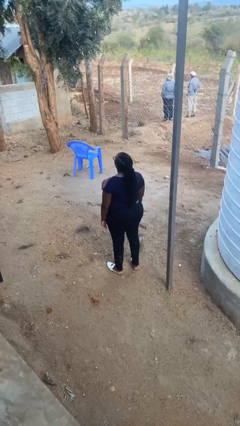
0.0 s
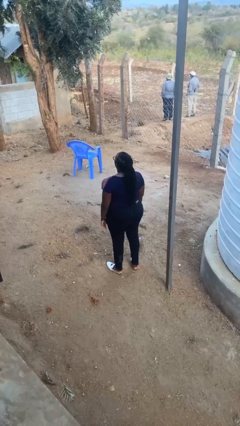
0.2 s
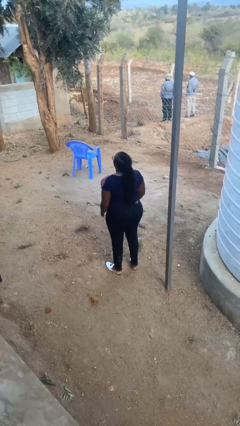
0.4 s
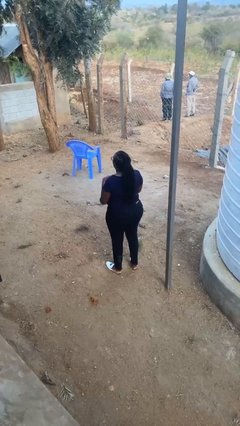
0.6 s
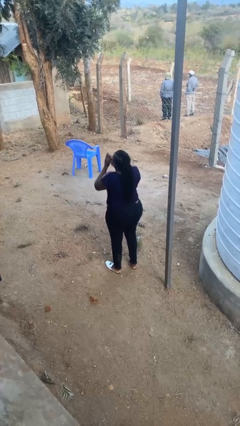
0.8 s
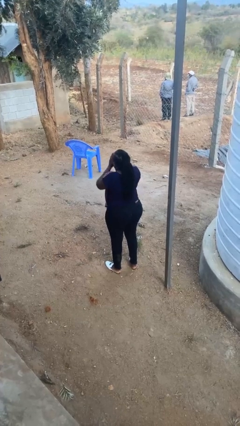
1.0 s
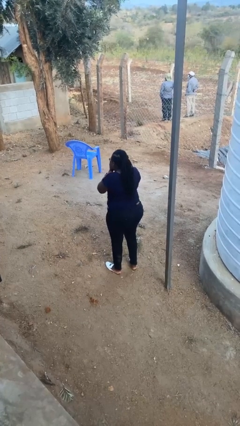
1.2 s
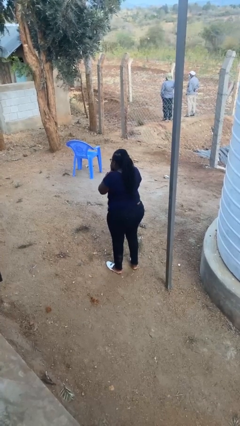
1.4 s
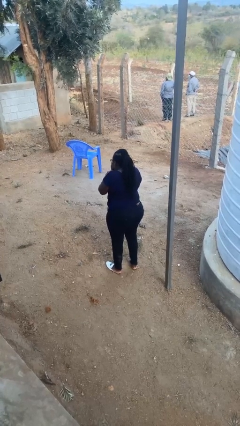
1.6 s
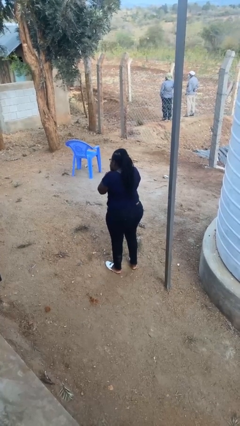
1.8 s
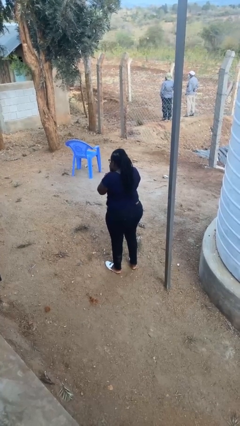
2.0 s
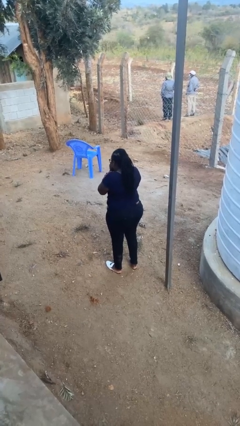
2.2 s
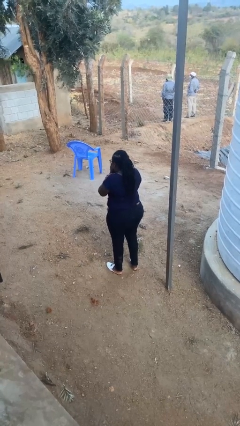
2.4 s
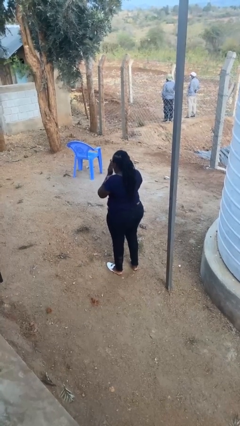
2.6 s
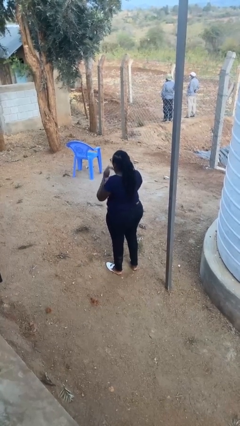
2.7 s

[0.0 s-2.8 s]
person sneezes into hand

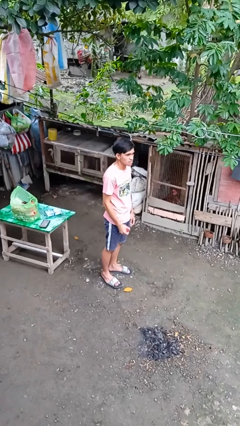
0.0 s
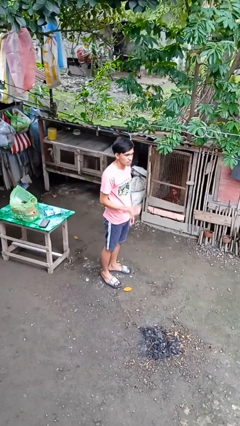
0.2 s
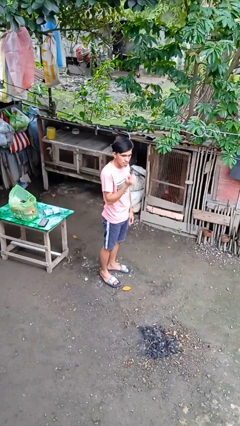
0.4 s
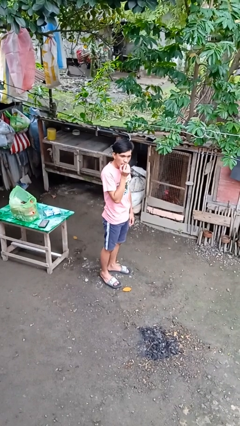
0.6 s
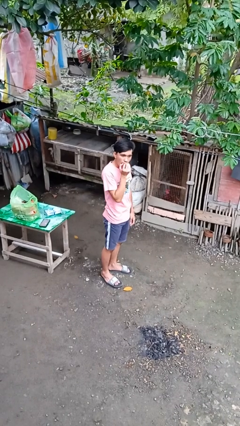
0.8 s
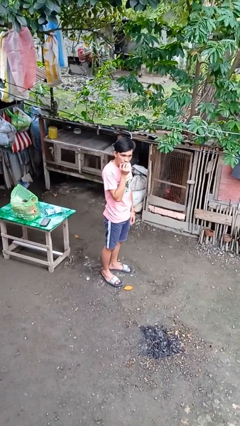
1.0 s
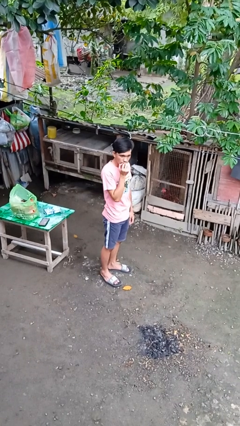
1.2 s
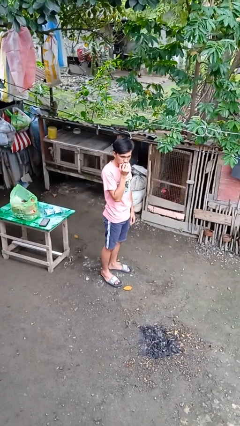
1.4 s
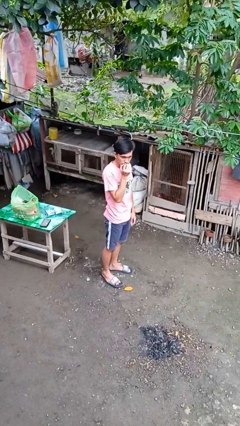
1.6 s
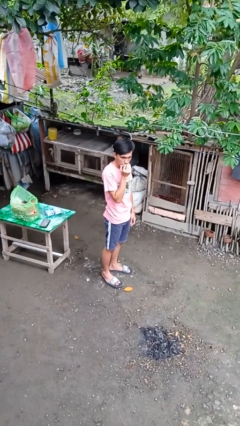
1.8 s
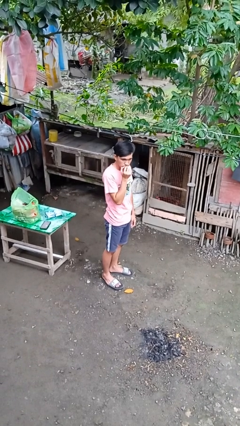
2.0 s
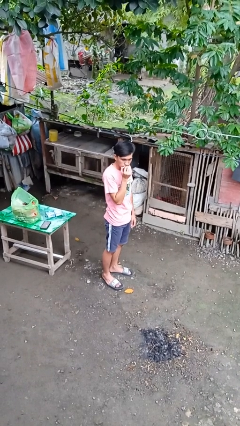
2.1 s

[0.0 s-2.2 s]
person eats apple

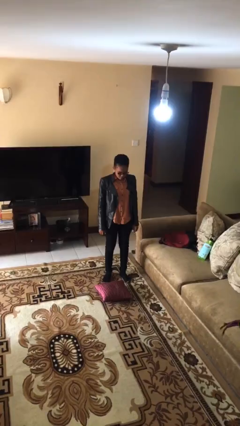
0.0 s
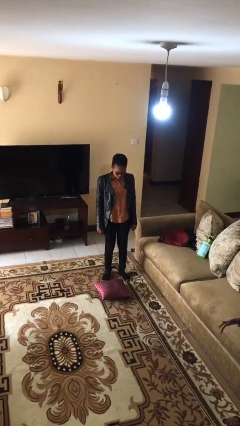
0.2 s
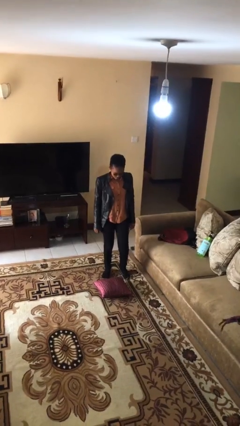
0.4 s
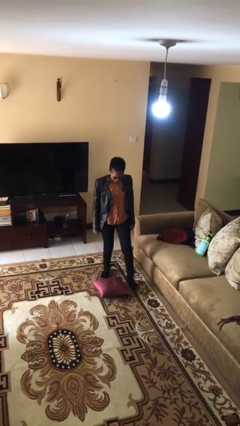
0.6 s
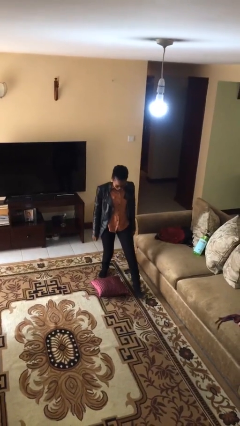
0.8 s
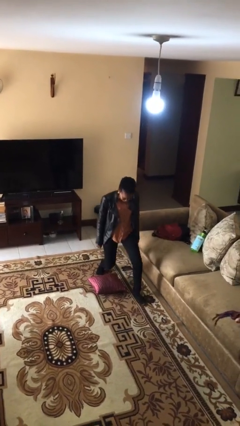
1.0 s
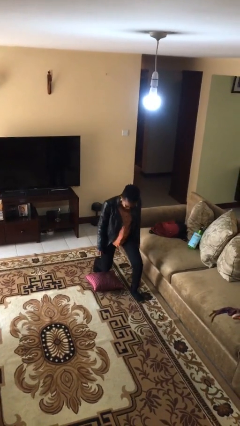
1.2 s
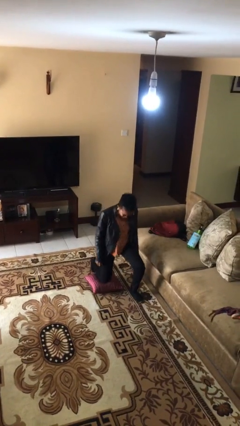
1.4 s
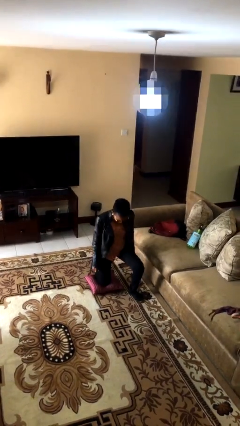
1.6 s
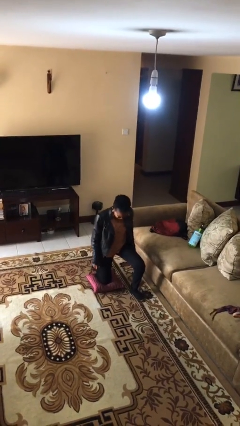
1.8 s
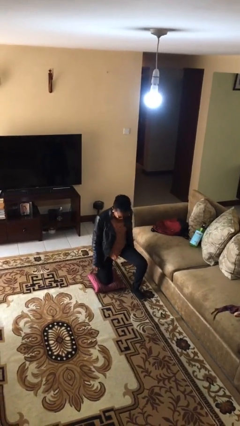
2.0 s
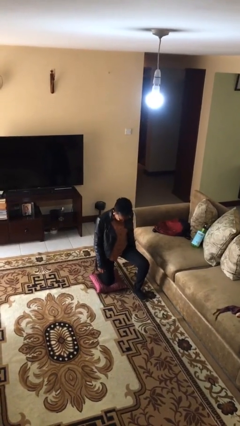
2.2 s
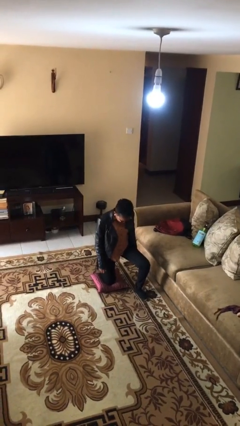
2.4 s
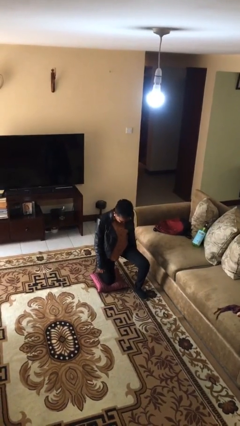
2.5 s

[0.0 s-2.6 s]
person kneels

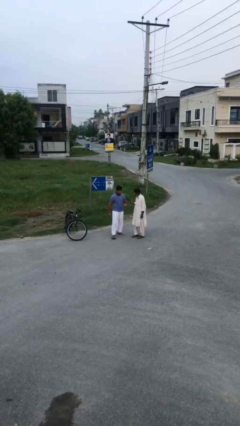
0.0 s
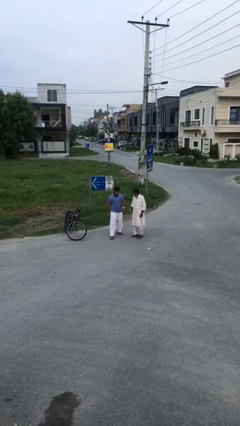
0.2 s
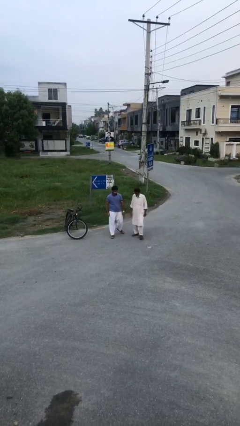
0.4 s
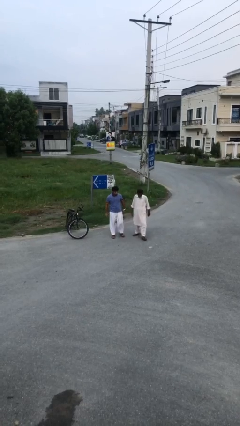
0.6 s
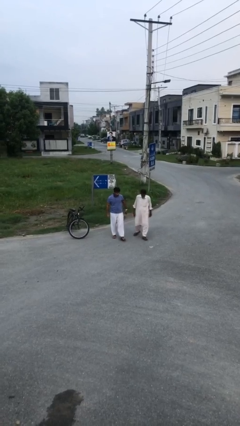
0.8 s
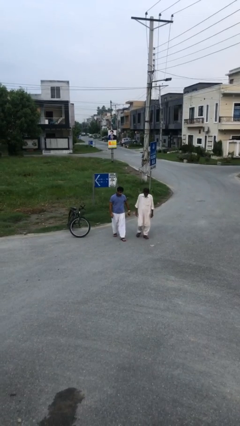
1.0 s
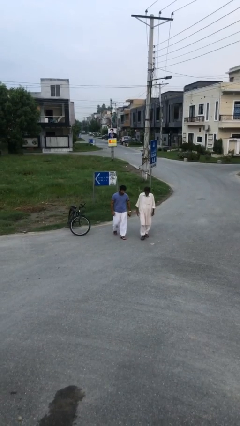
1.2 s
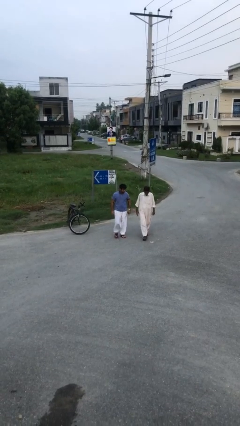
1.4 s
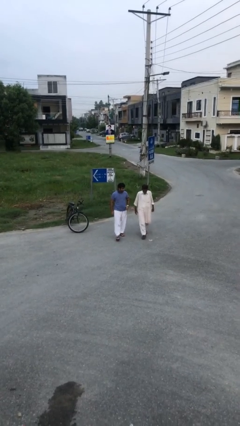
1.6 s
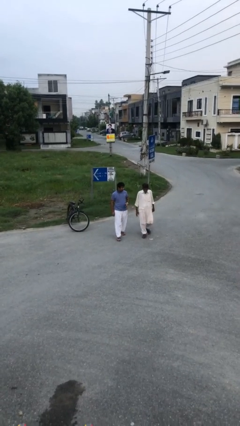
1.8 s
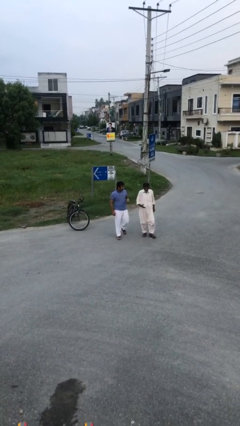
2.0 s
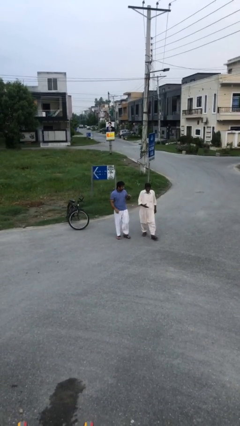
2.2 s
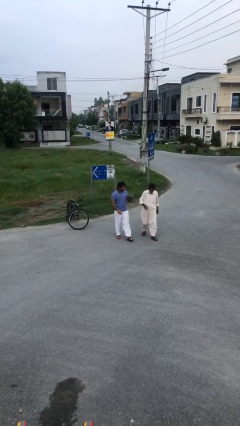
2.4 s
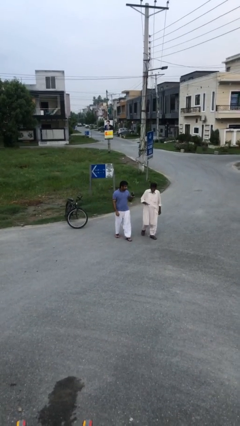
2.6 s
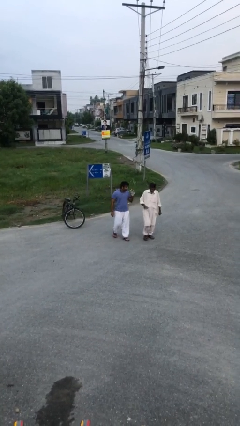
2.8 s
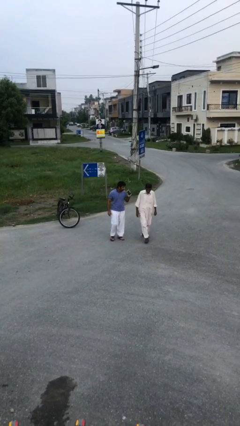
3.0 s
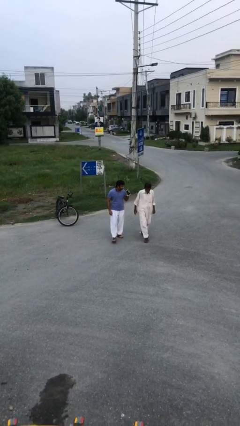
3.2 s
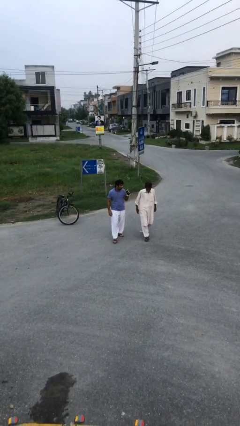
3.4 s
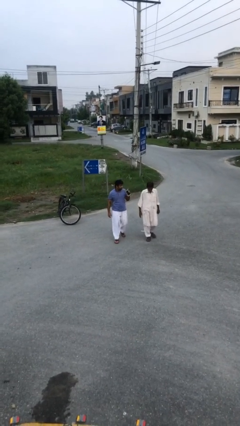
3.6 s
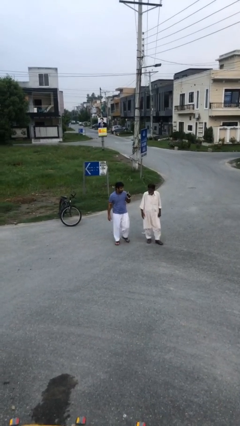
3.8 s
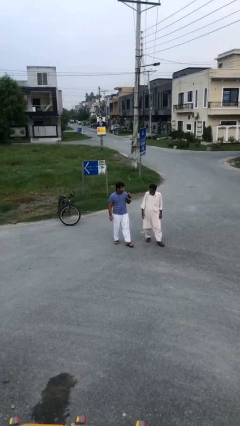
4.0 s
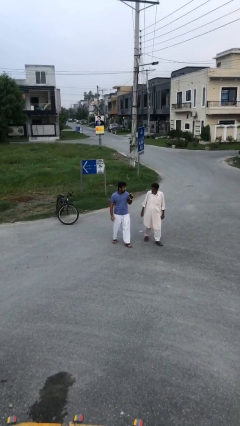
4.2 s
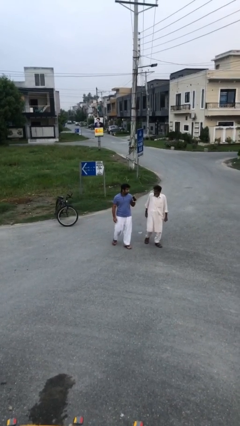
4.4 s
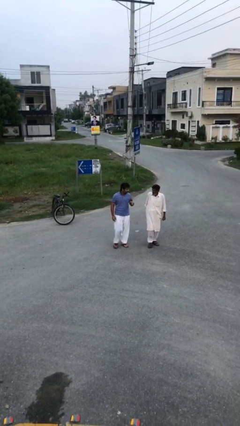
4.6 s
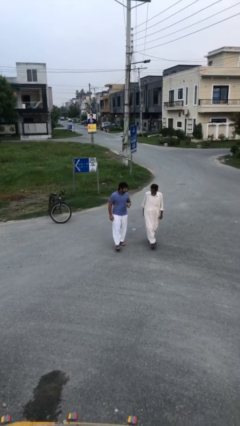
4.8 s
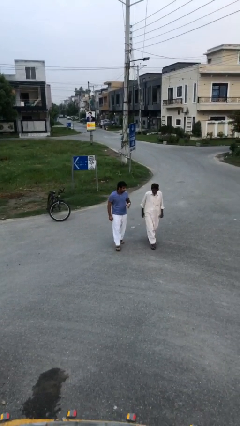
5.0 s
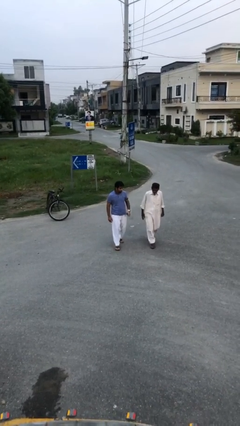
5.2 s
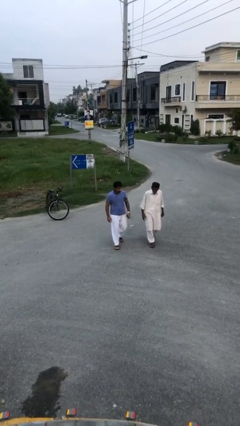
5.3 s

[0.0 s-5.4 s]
person talks to person

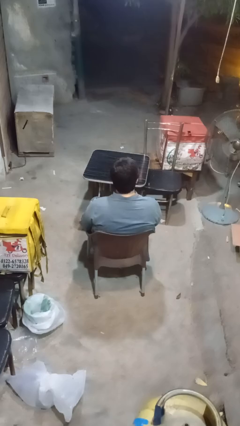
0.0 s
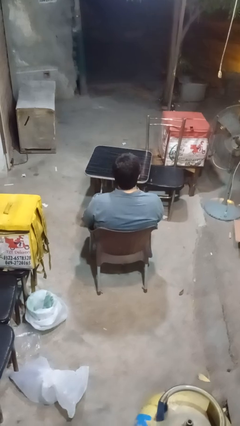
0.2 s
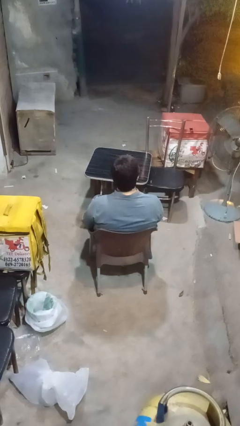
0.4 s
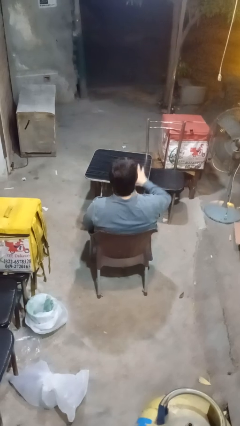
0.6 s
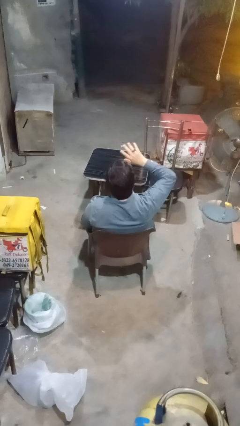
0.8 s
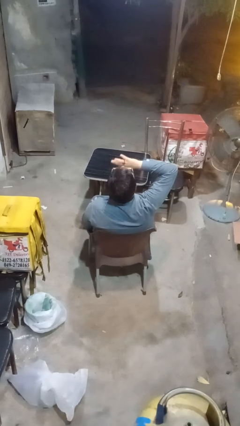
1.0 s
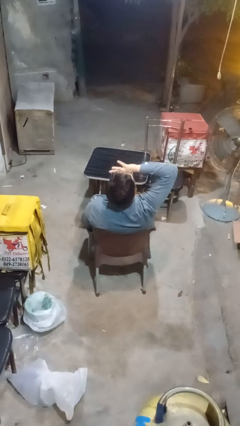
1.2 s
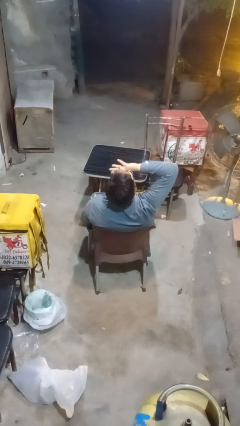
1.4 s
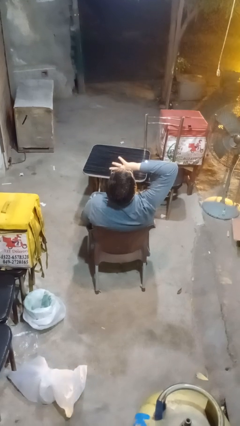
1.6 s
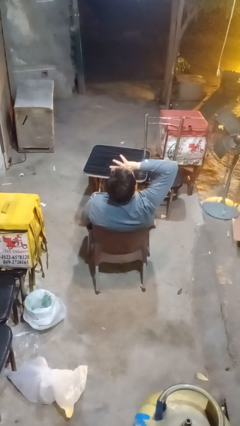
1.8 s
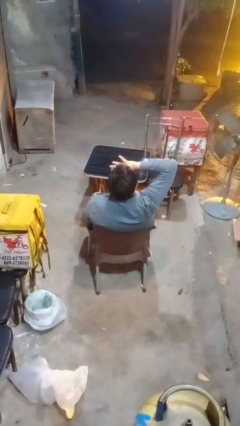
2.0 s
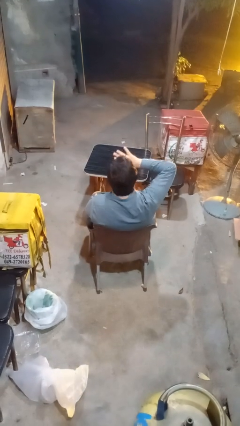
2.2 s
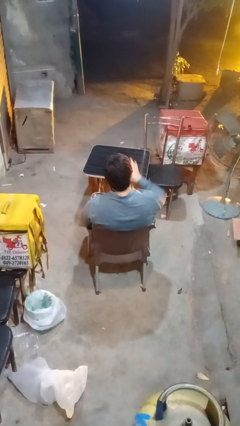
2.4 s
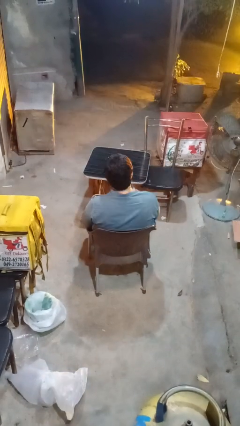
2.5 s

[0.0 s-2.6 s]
person yawns

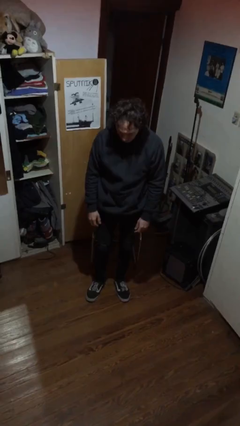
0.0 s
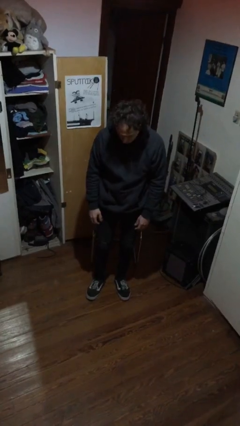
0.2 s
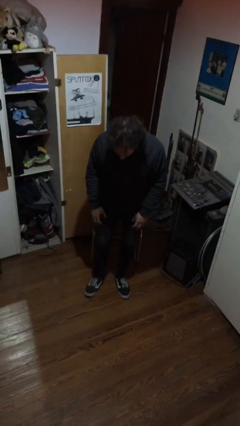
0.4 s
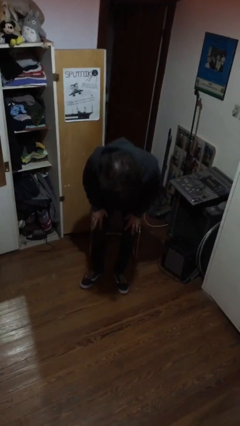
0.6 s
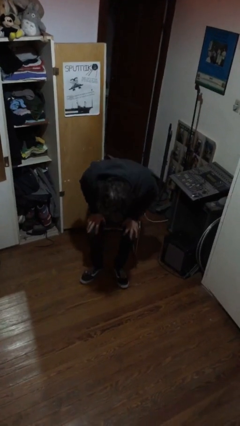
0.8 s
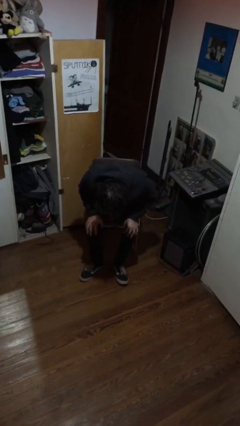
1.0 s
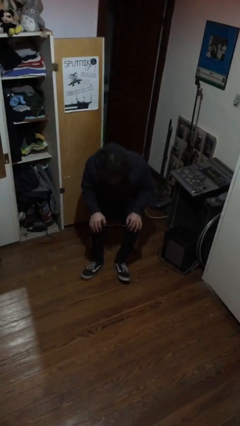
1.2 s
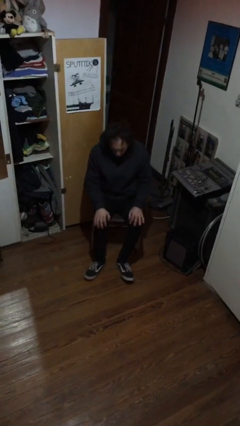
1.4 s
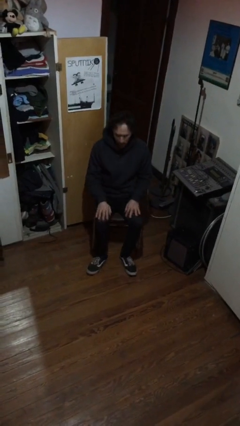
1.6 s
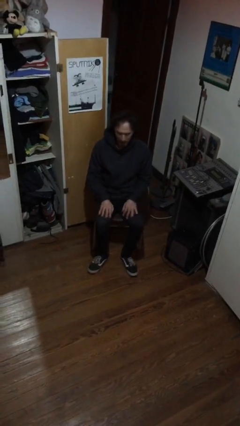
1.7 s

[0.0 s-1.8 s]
person sits down

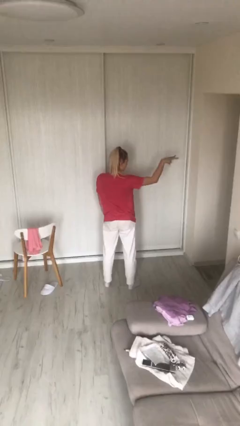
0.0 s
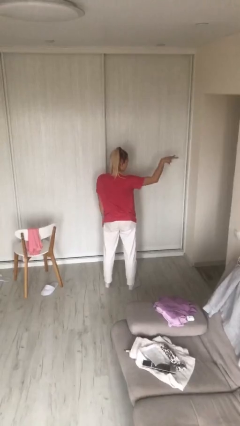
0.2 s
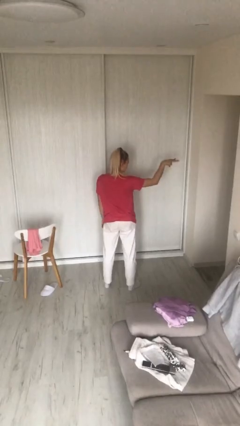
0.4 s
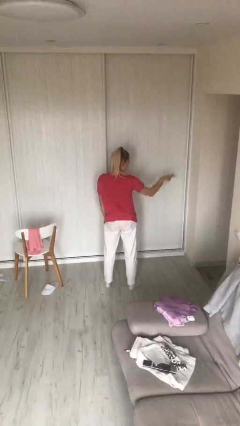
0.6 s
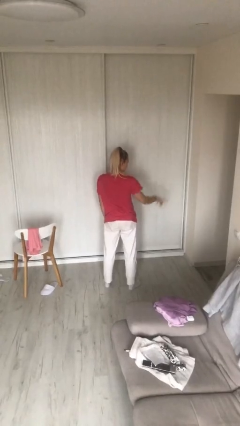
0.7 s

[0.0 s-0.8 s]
person gestures watch closely
